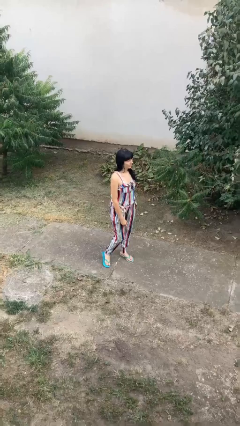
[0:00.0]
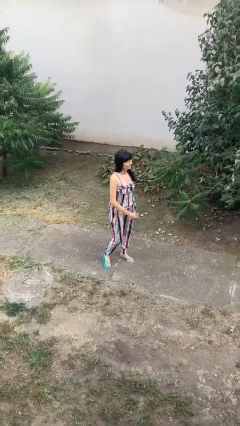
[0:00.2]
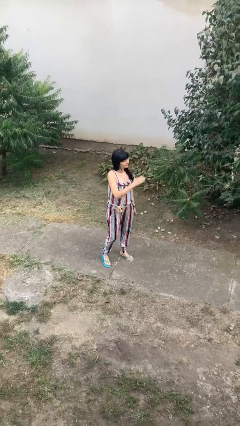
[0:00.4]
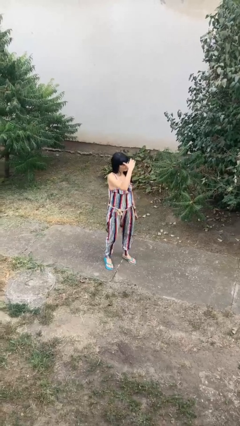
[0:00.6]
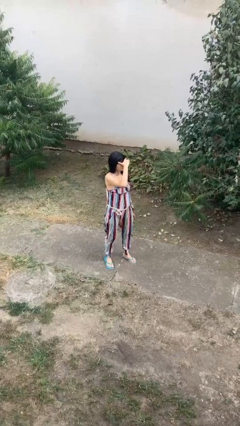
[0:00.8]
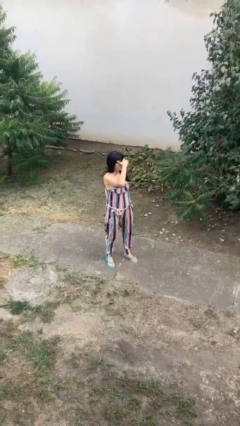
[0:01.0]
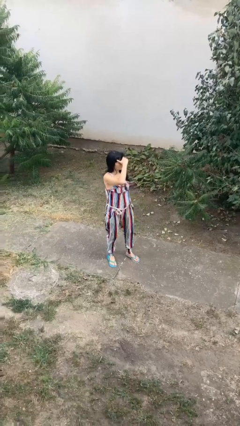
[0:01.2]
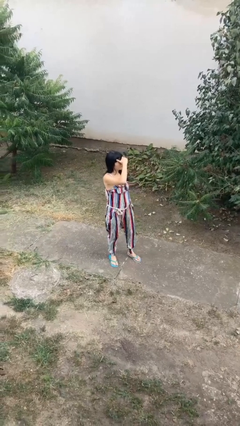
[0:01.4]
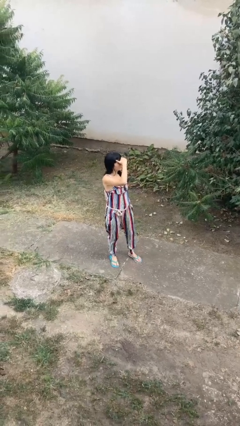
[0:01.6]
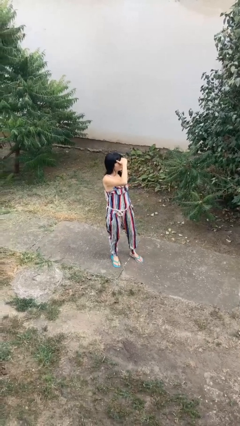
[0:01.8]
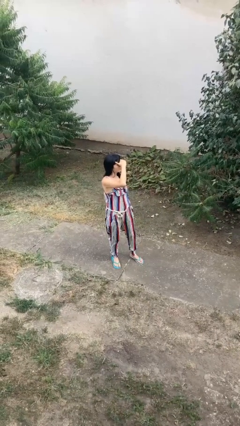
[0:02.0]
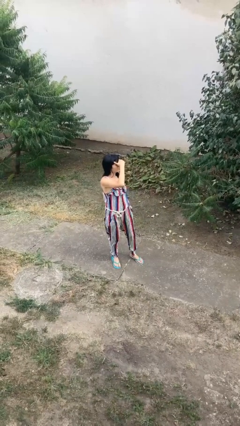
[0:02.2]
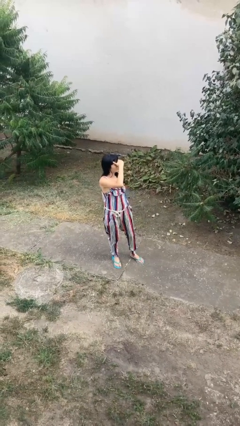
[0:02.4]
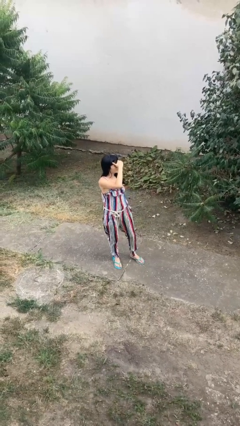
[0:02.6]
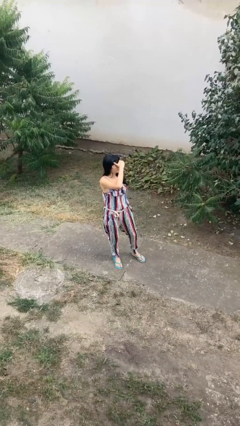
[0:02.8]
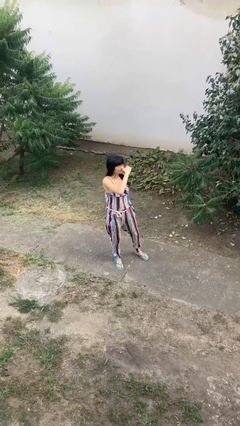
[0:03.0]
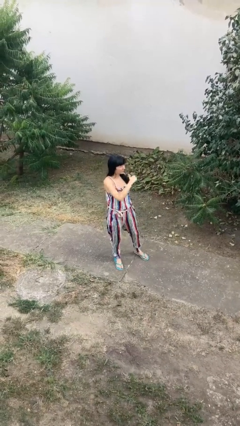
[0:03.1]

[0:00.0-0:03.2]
person shades eyes

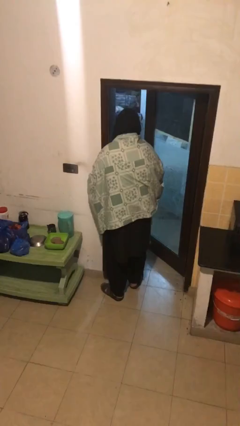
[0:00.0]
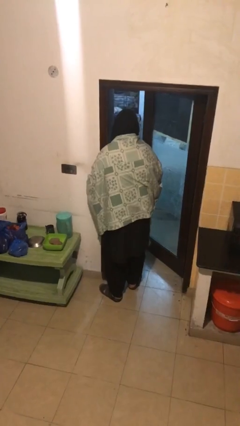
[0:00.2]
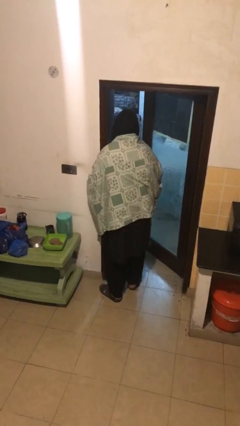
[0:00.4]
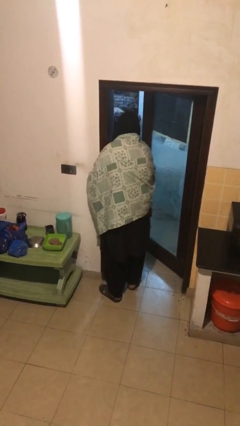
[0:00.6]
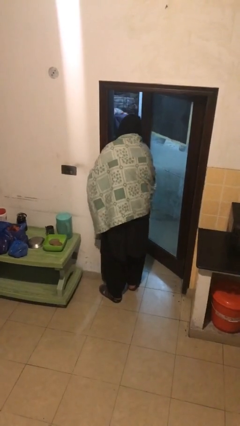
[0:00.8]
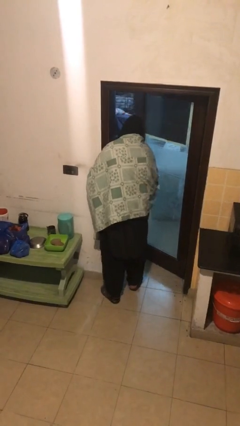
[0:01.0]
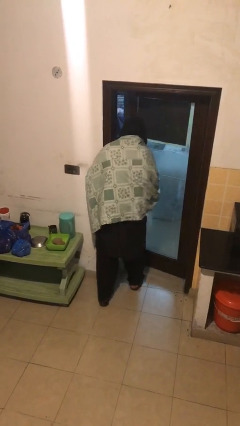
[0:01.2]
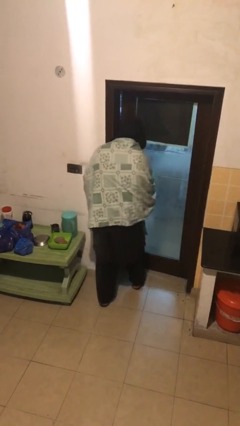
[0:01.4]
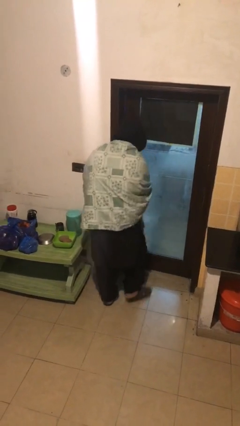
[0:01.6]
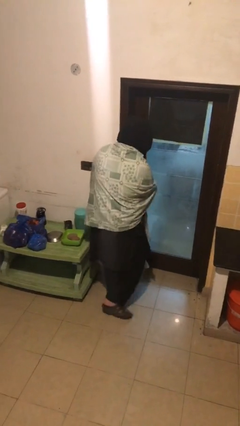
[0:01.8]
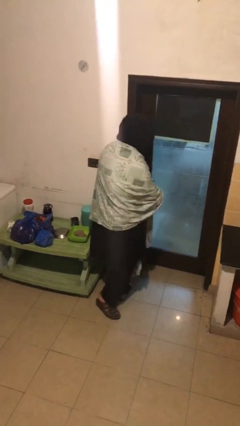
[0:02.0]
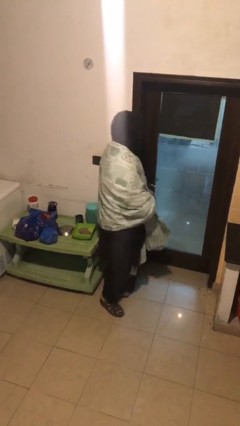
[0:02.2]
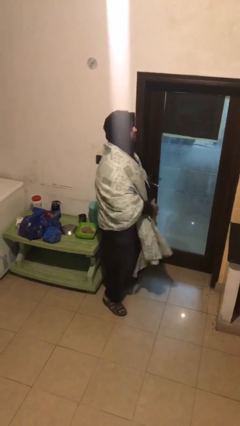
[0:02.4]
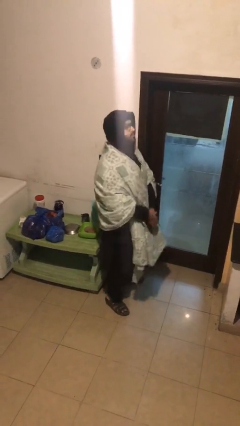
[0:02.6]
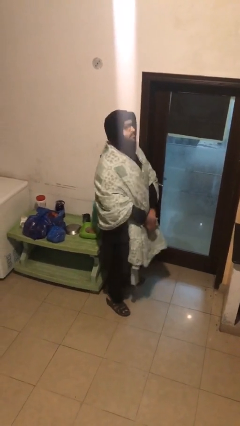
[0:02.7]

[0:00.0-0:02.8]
person closes facility door

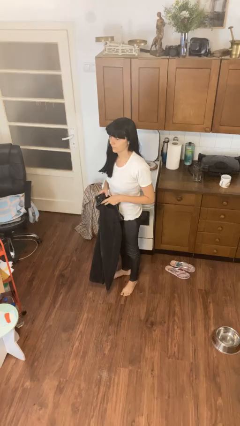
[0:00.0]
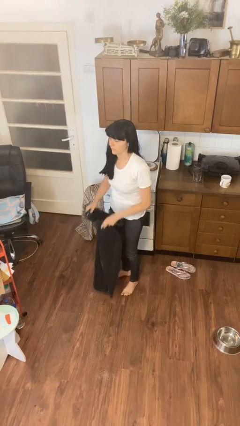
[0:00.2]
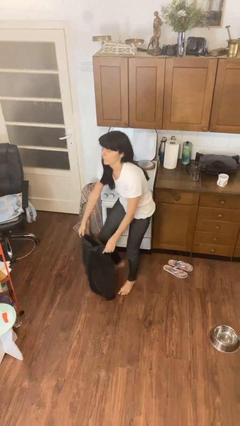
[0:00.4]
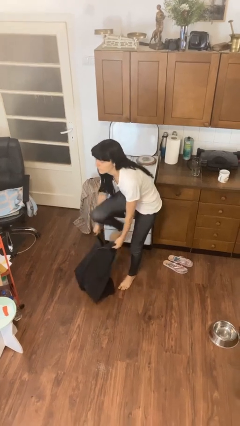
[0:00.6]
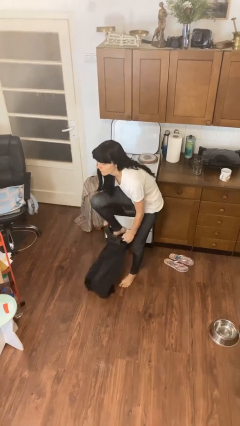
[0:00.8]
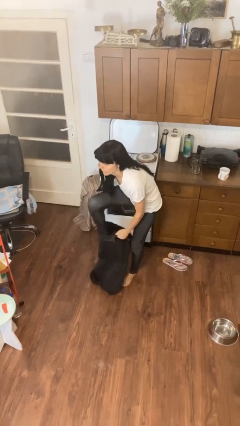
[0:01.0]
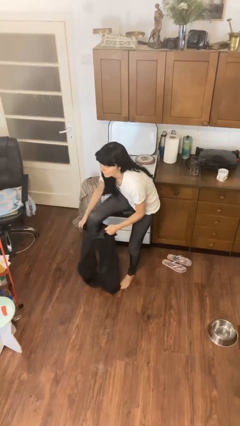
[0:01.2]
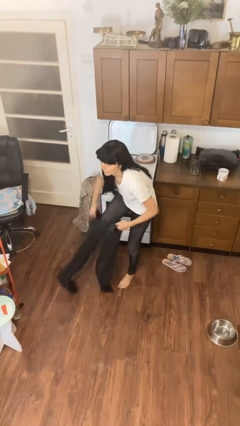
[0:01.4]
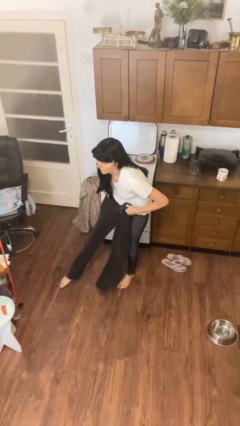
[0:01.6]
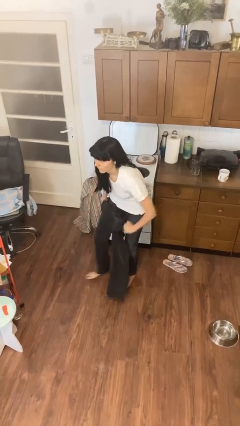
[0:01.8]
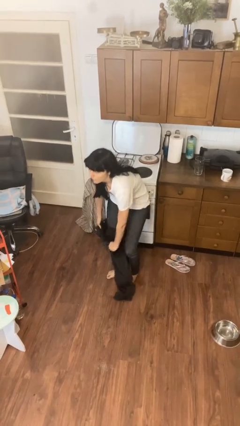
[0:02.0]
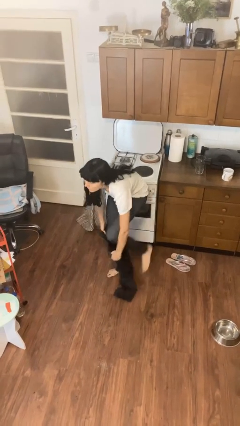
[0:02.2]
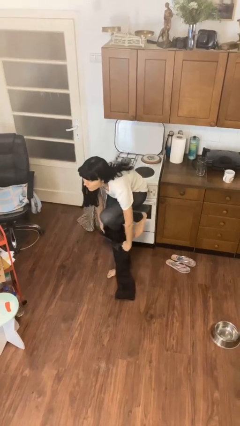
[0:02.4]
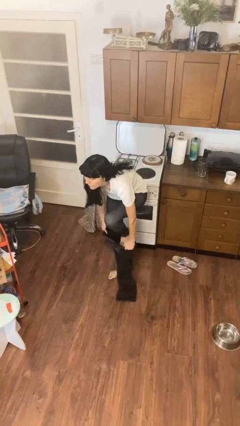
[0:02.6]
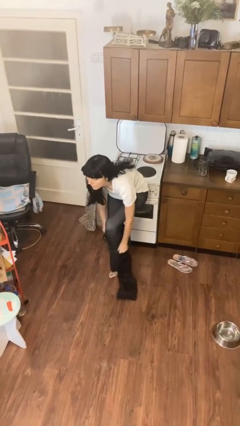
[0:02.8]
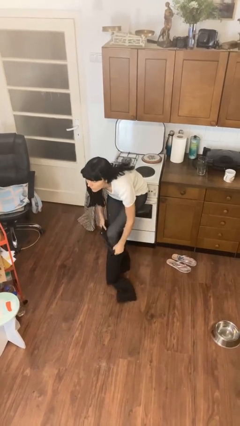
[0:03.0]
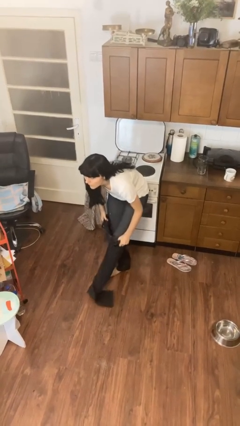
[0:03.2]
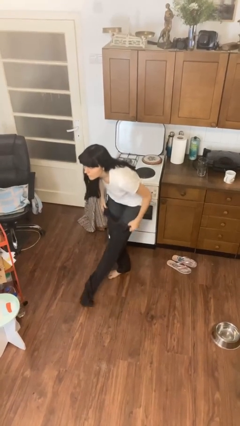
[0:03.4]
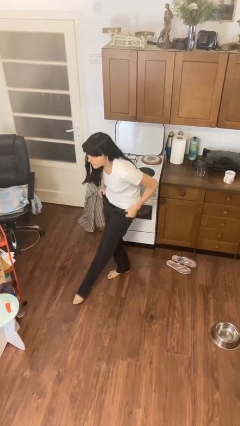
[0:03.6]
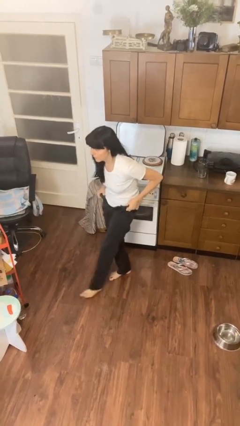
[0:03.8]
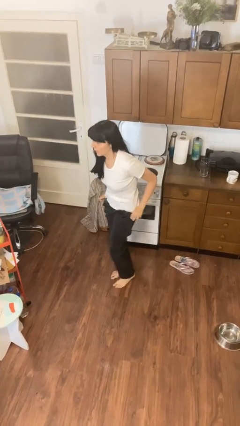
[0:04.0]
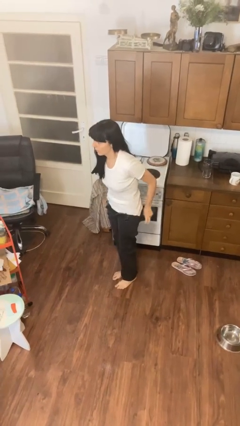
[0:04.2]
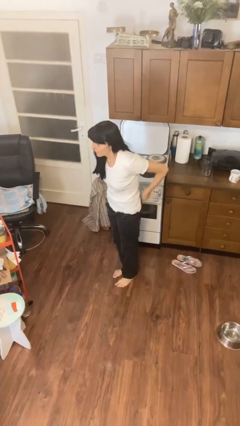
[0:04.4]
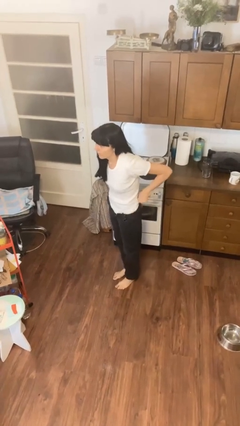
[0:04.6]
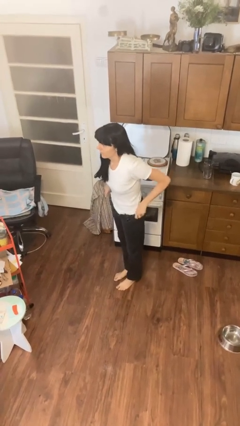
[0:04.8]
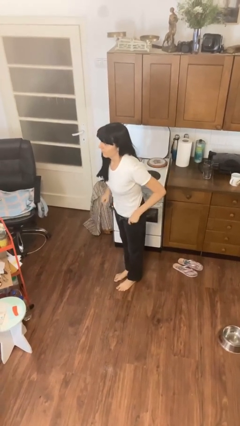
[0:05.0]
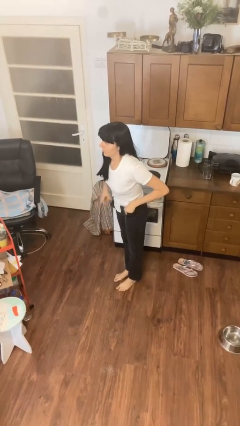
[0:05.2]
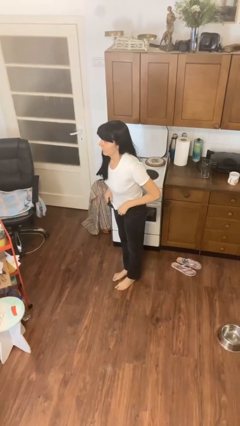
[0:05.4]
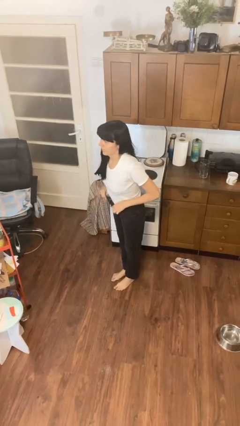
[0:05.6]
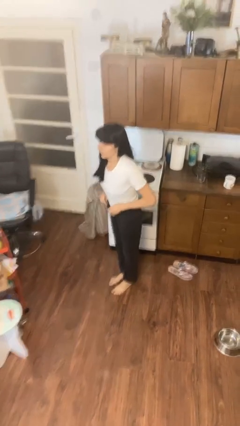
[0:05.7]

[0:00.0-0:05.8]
person puts on pants

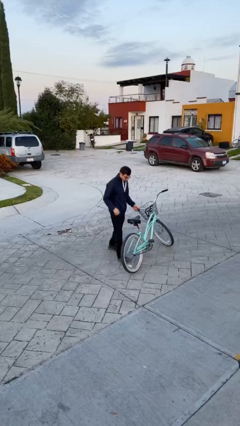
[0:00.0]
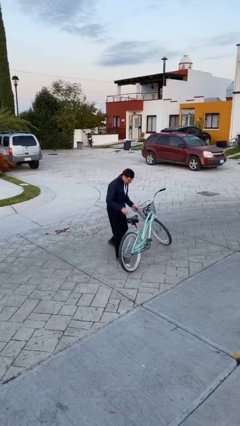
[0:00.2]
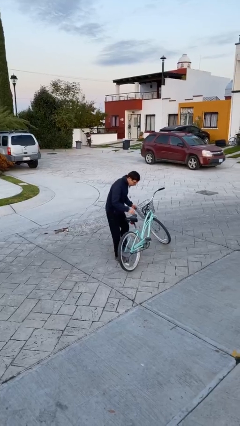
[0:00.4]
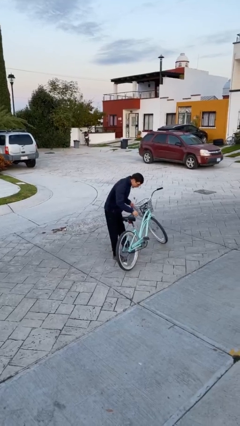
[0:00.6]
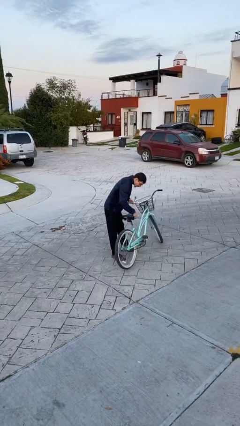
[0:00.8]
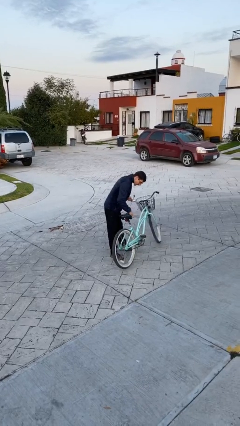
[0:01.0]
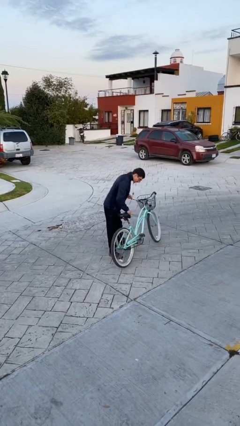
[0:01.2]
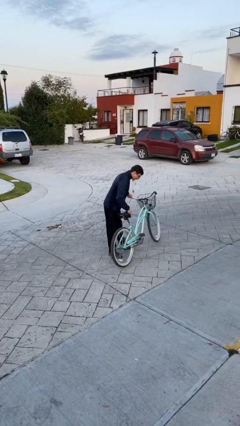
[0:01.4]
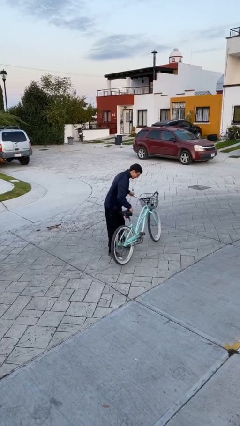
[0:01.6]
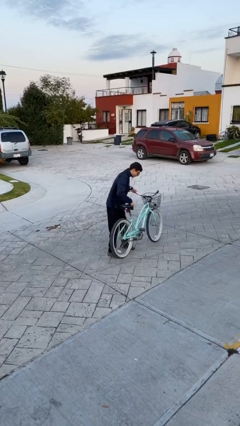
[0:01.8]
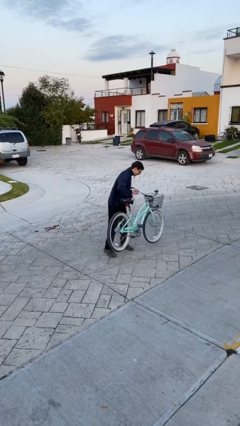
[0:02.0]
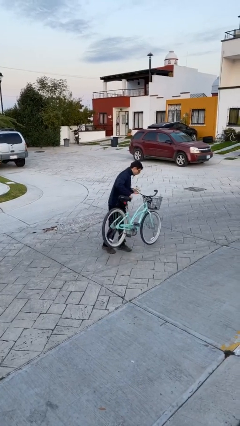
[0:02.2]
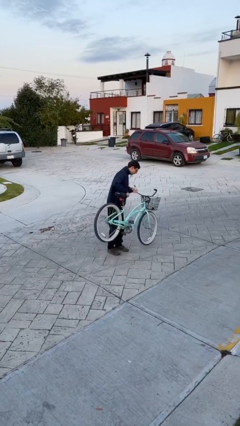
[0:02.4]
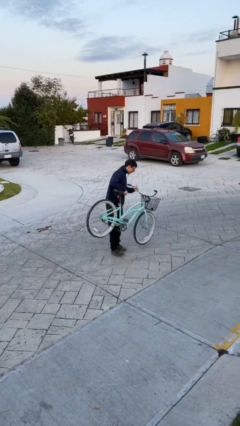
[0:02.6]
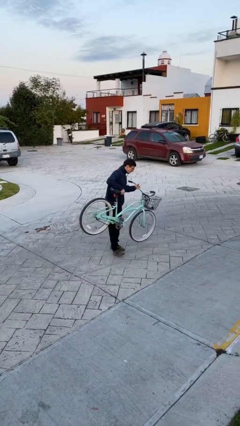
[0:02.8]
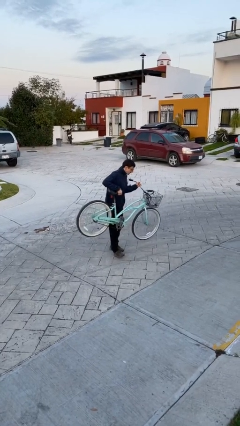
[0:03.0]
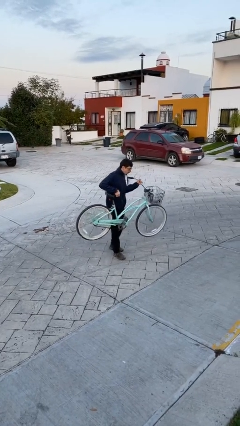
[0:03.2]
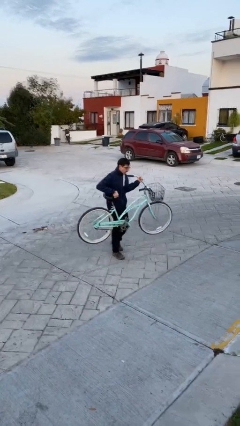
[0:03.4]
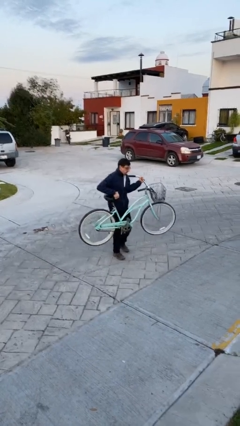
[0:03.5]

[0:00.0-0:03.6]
person picks up object from floor

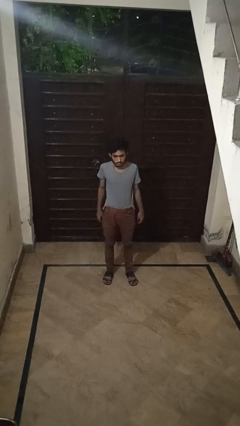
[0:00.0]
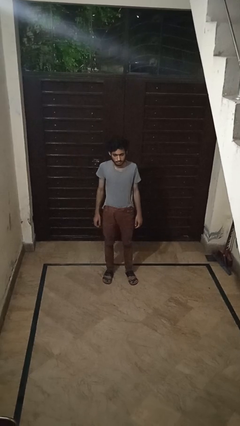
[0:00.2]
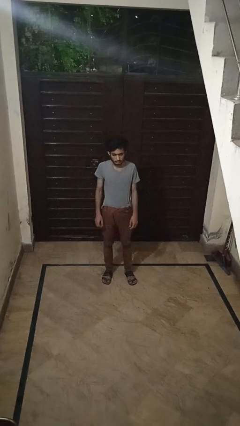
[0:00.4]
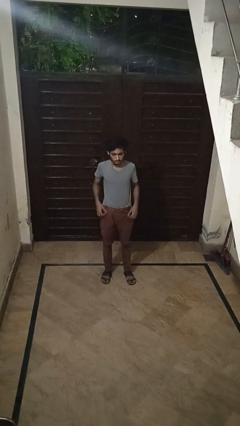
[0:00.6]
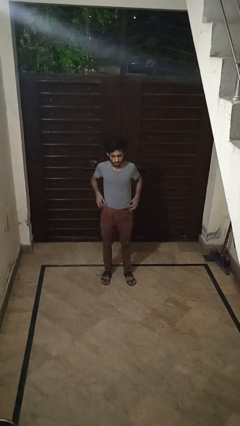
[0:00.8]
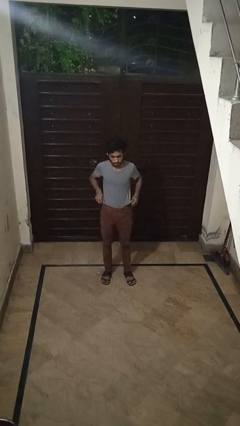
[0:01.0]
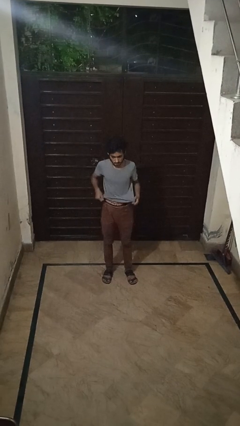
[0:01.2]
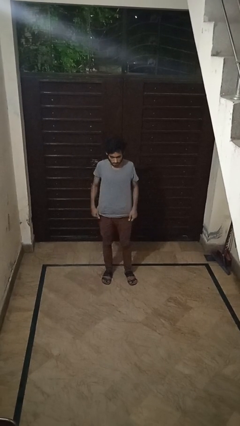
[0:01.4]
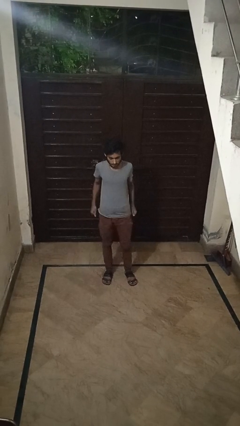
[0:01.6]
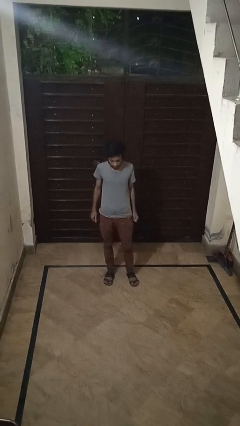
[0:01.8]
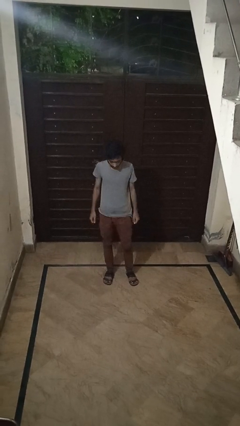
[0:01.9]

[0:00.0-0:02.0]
person untucks shirt
